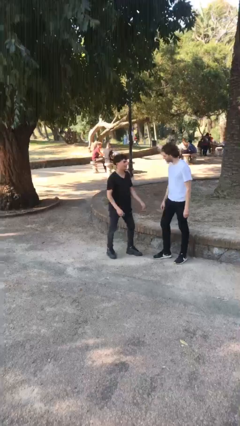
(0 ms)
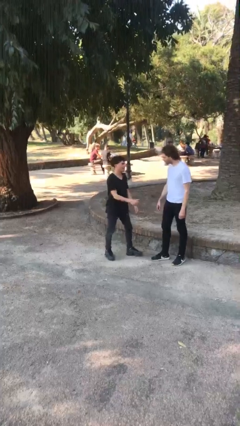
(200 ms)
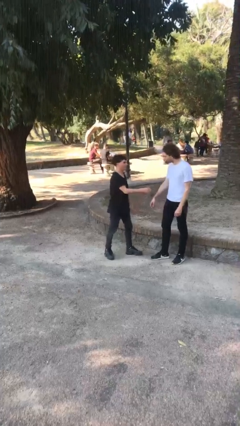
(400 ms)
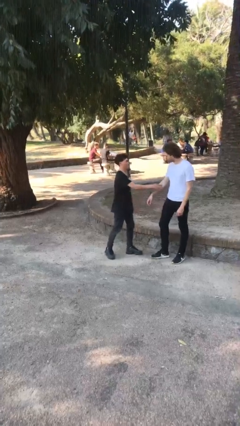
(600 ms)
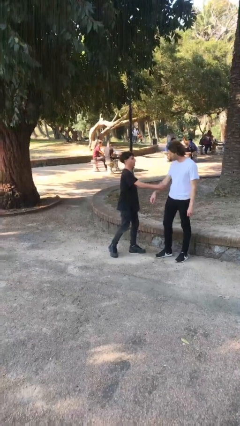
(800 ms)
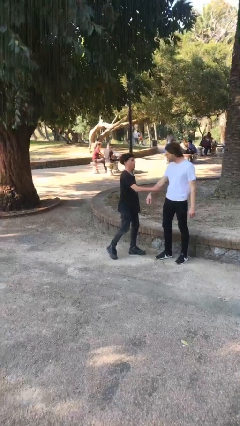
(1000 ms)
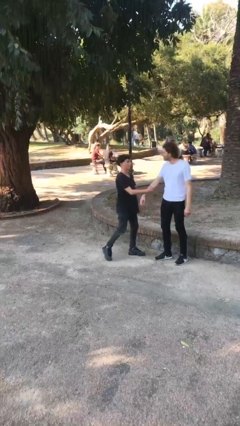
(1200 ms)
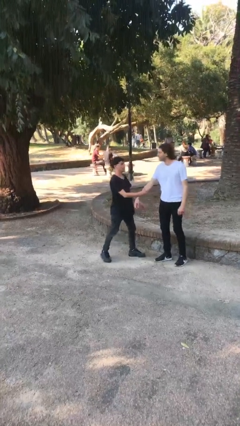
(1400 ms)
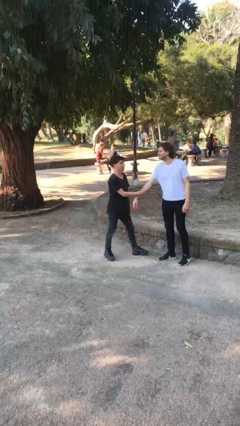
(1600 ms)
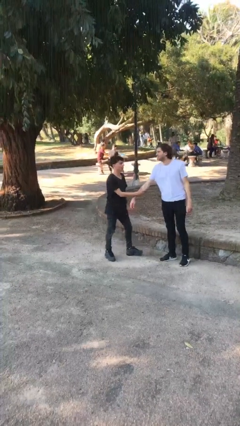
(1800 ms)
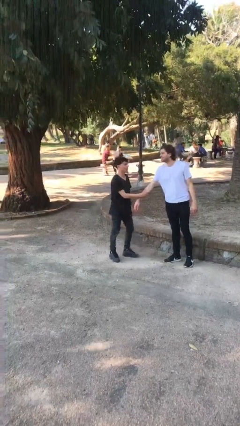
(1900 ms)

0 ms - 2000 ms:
person grabs person by forearm

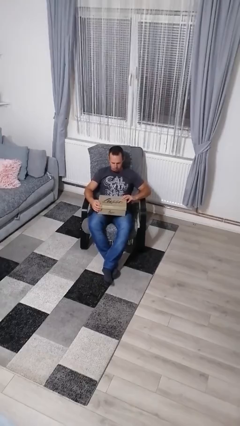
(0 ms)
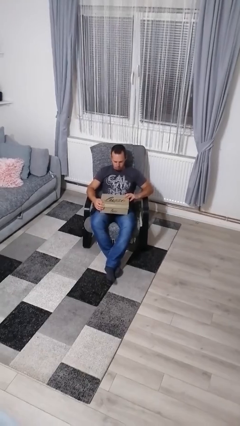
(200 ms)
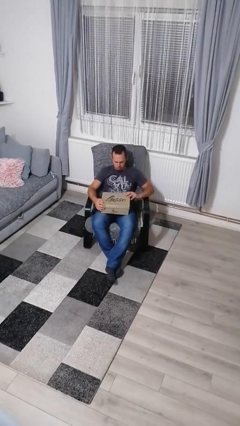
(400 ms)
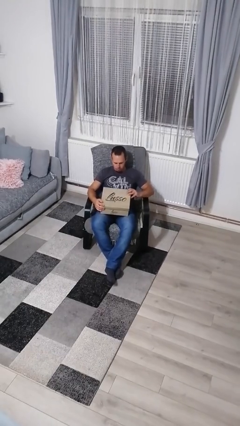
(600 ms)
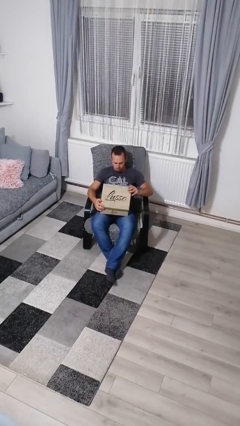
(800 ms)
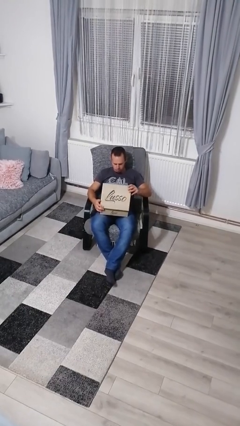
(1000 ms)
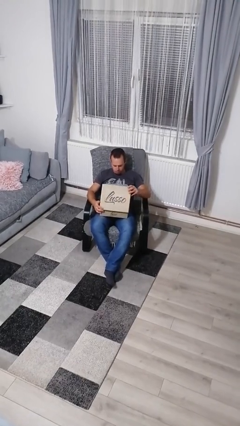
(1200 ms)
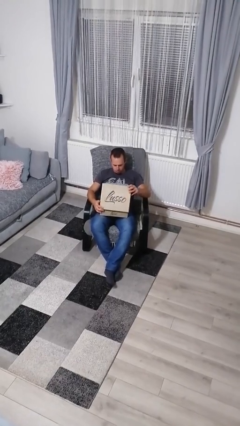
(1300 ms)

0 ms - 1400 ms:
person opens box

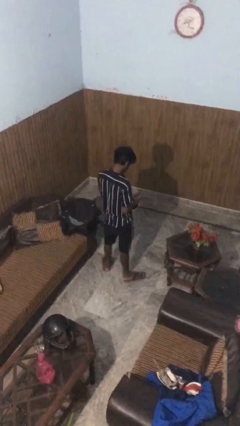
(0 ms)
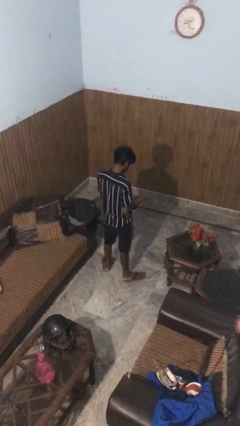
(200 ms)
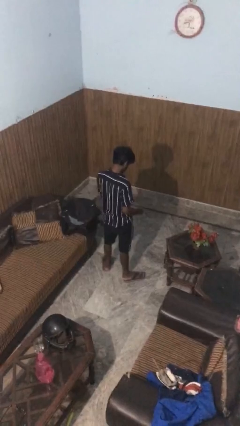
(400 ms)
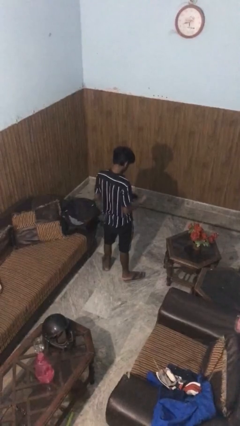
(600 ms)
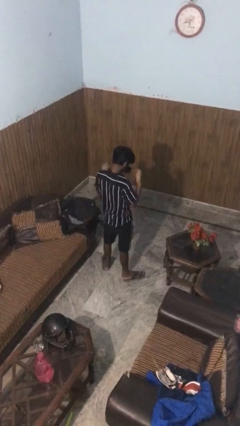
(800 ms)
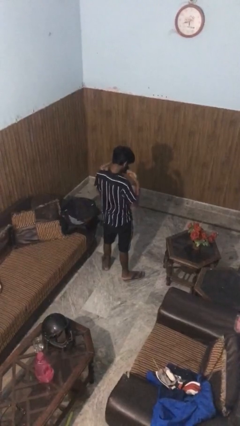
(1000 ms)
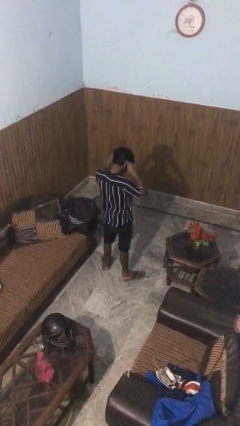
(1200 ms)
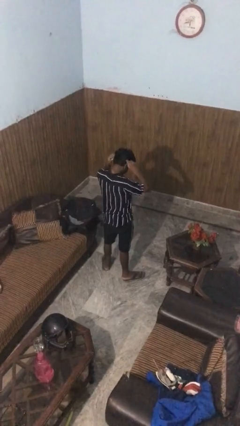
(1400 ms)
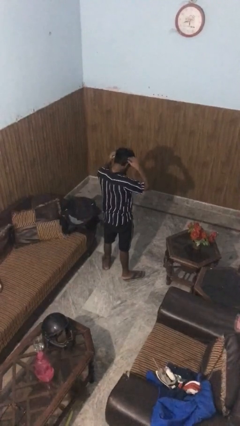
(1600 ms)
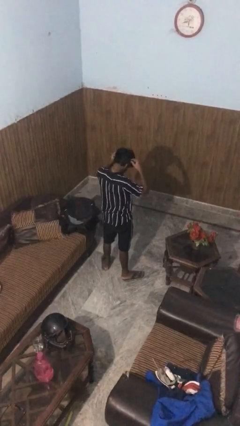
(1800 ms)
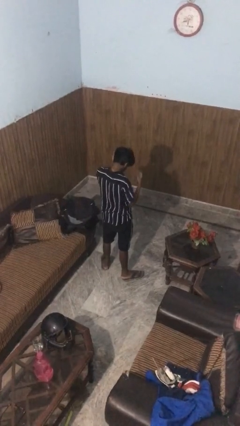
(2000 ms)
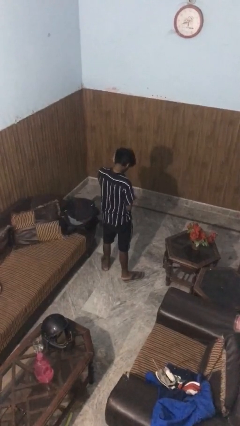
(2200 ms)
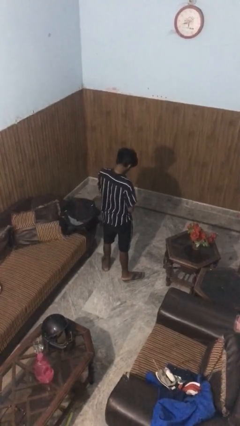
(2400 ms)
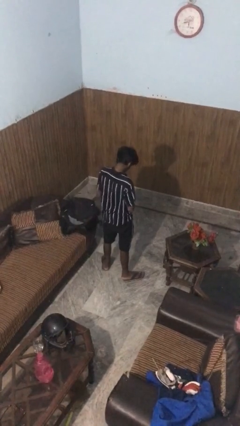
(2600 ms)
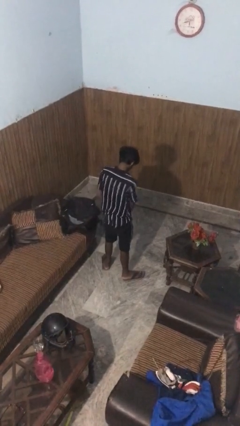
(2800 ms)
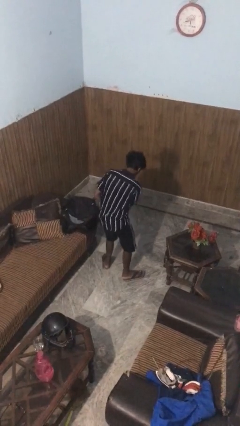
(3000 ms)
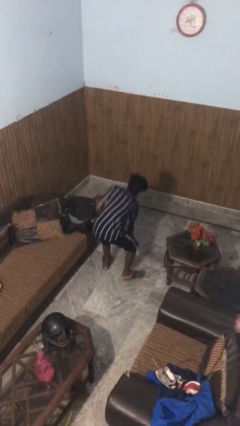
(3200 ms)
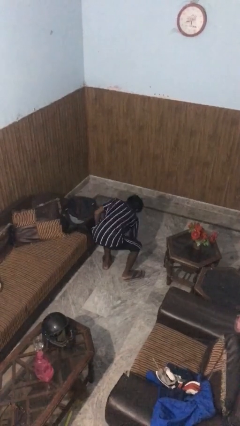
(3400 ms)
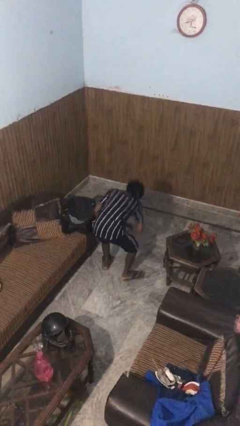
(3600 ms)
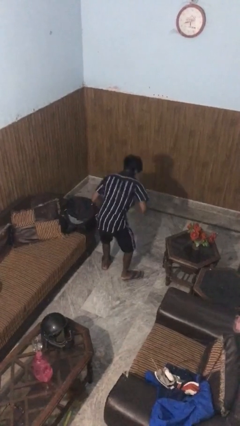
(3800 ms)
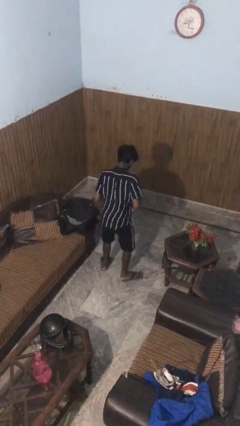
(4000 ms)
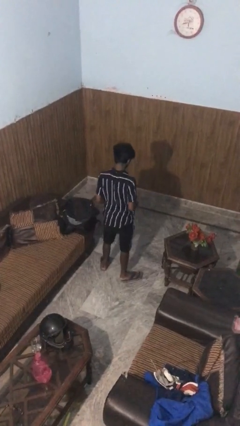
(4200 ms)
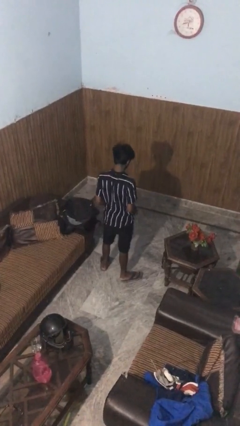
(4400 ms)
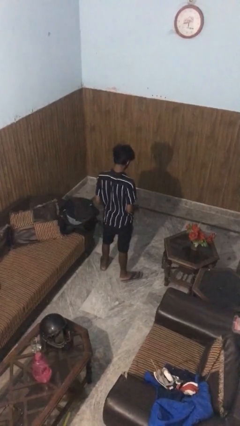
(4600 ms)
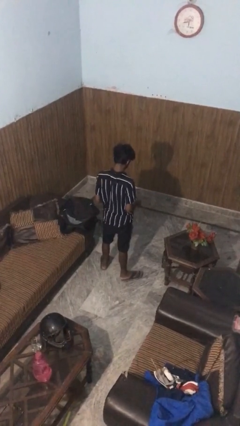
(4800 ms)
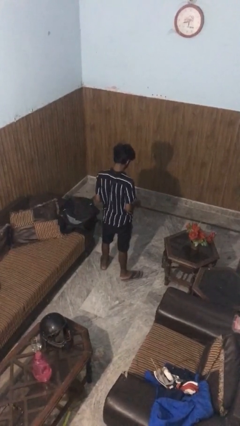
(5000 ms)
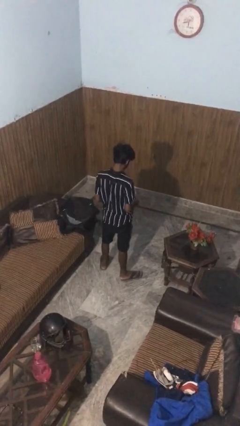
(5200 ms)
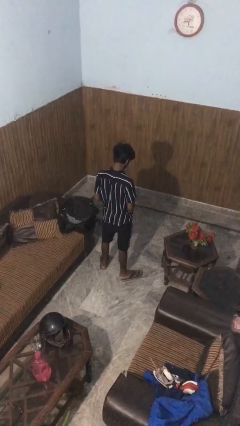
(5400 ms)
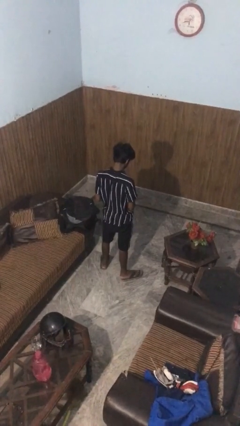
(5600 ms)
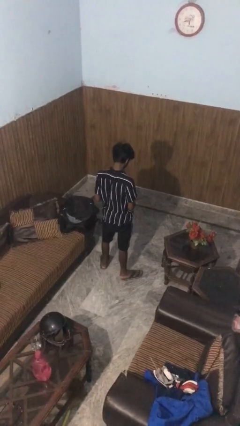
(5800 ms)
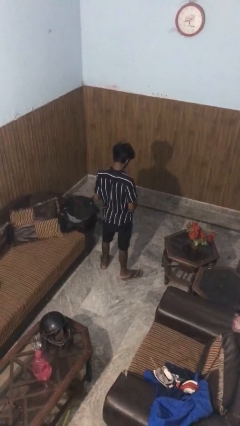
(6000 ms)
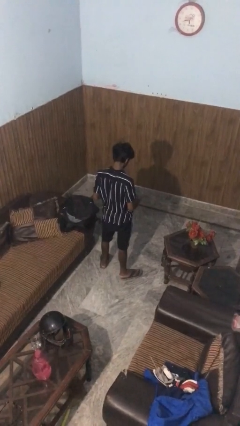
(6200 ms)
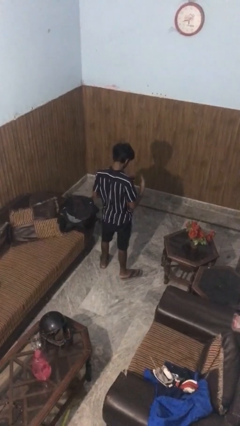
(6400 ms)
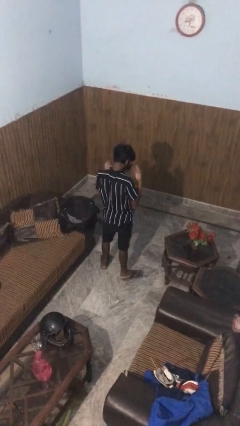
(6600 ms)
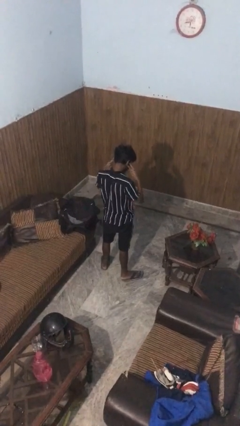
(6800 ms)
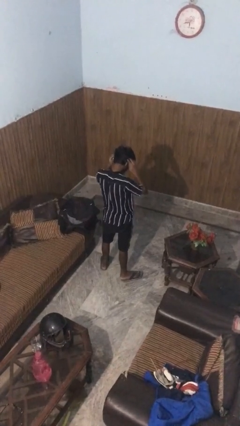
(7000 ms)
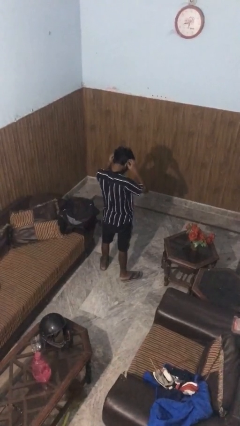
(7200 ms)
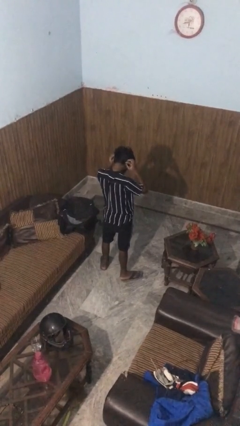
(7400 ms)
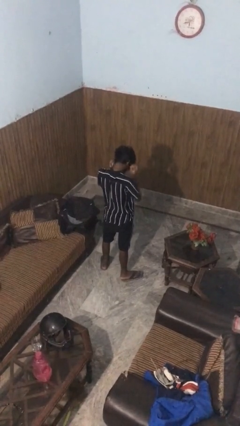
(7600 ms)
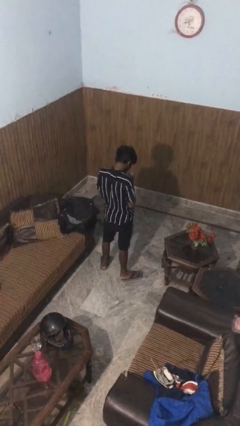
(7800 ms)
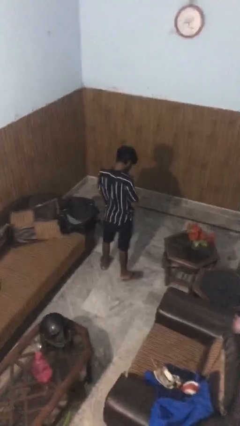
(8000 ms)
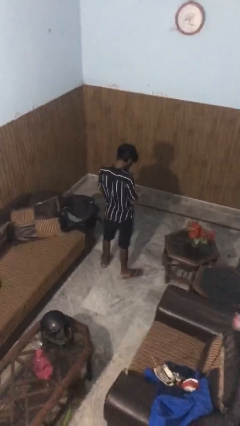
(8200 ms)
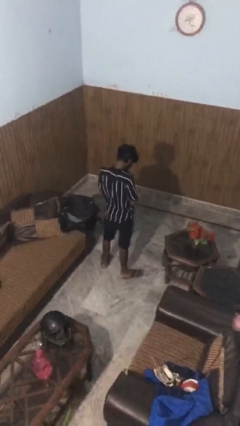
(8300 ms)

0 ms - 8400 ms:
person puts on facemask

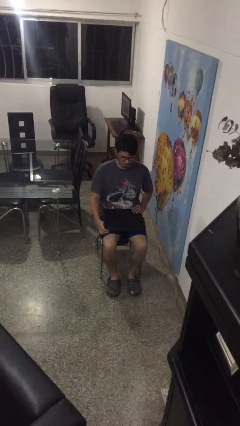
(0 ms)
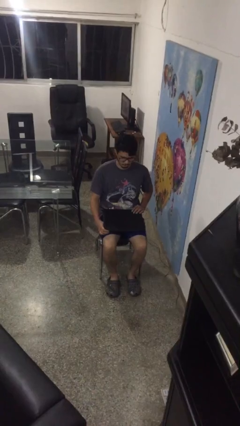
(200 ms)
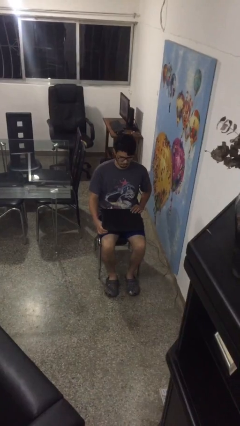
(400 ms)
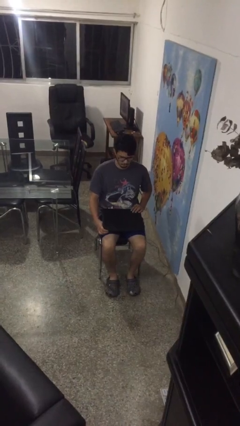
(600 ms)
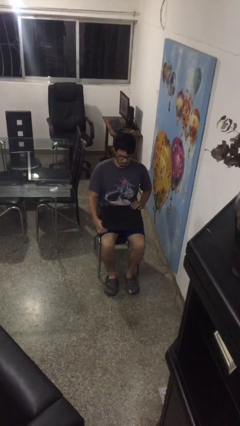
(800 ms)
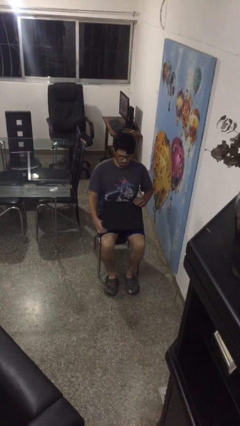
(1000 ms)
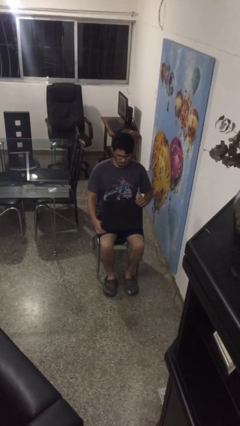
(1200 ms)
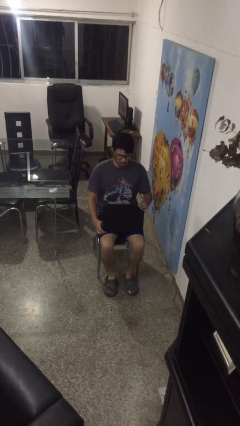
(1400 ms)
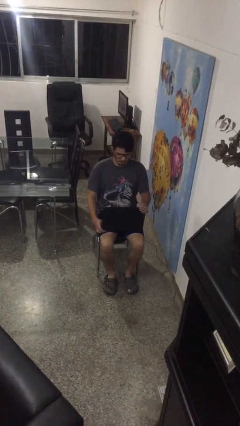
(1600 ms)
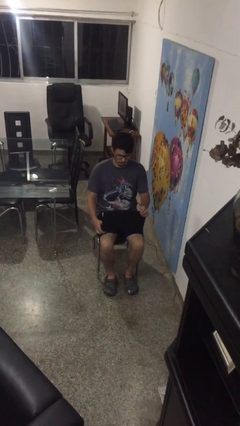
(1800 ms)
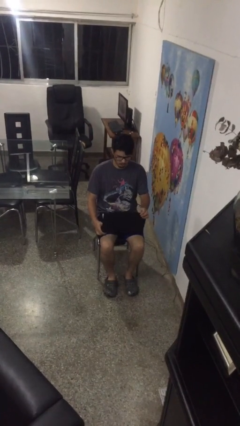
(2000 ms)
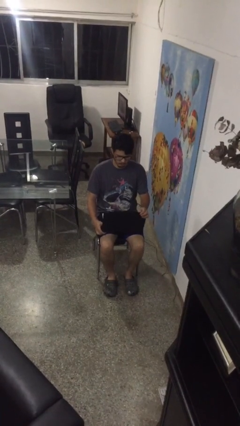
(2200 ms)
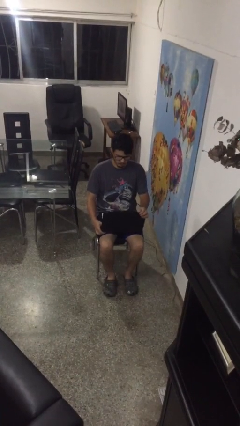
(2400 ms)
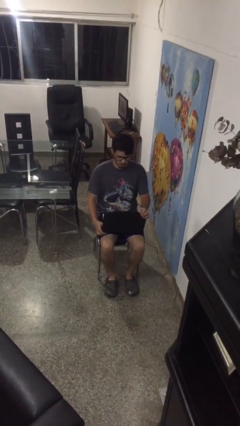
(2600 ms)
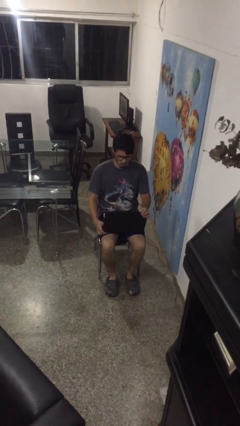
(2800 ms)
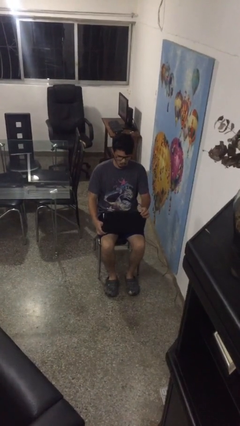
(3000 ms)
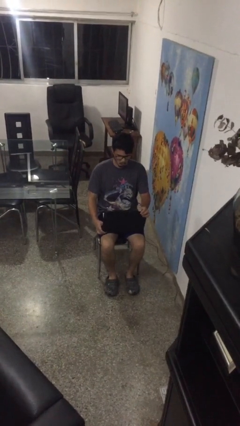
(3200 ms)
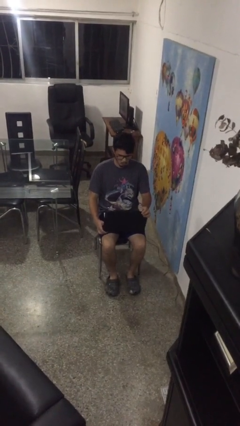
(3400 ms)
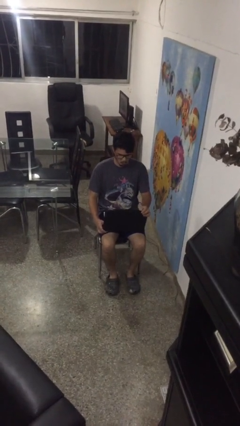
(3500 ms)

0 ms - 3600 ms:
person opens laptop

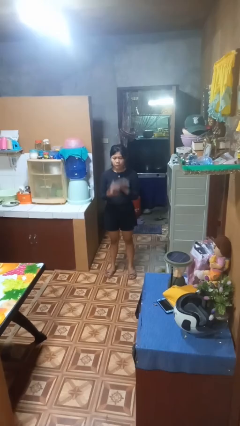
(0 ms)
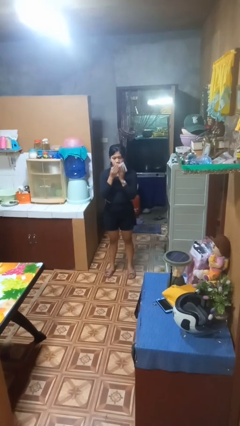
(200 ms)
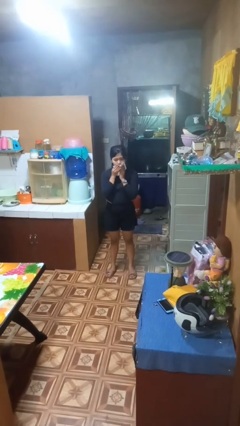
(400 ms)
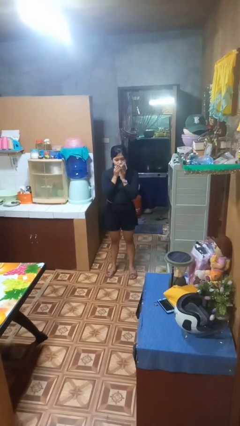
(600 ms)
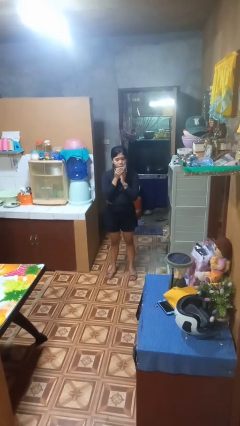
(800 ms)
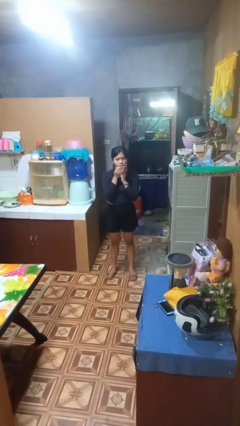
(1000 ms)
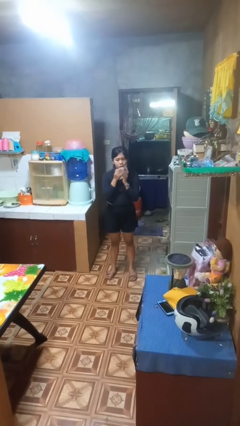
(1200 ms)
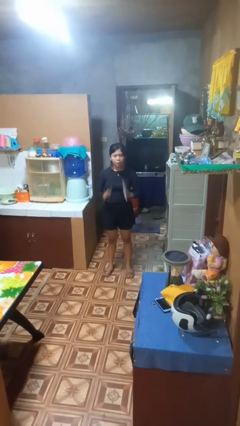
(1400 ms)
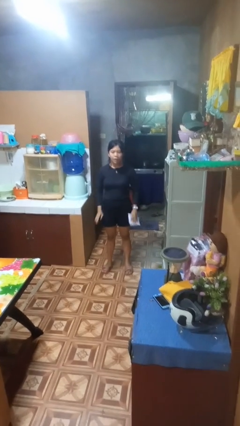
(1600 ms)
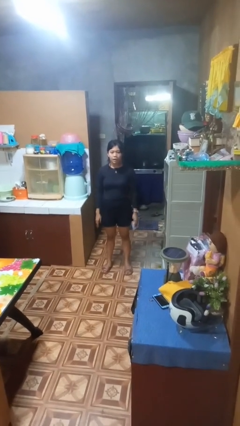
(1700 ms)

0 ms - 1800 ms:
person wipes mouth with napkin

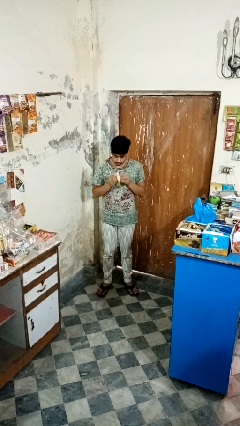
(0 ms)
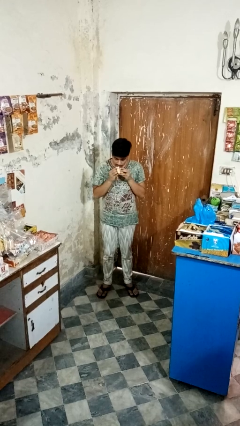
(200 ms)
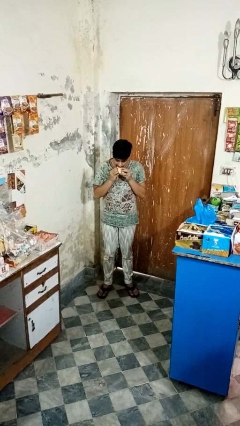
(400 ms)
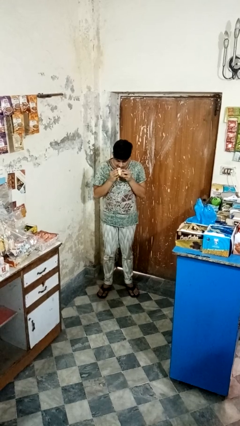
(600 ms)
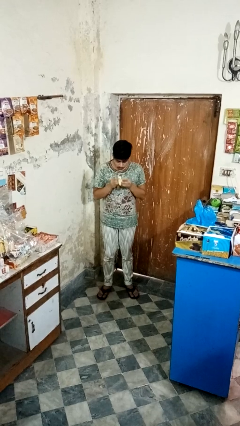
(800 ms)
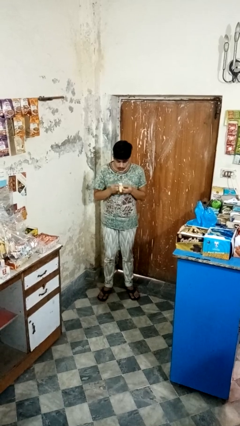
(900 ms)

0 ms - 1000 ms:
person eats banana
